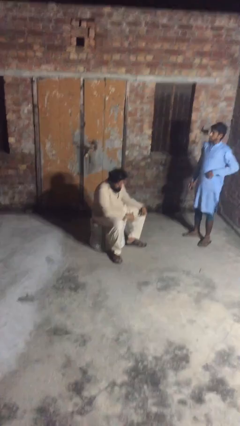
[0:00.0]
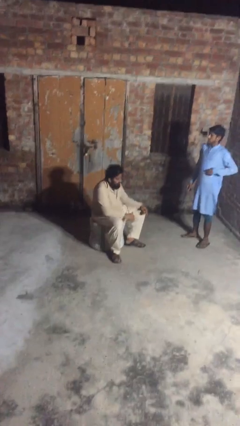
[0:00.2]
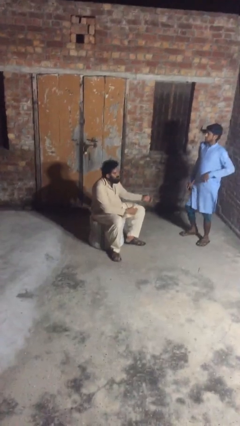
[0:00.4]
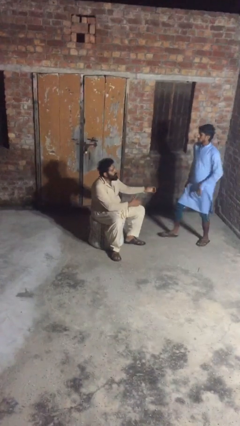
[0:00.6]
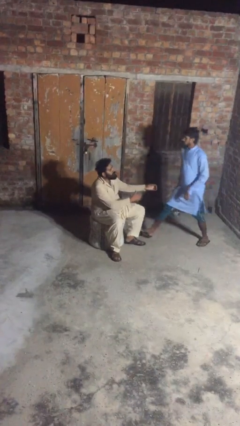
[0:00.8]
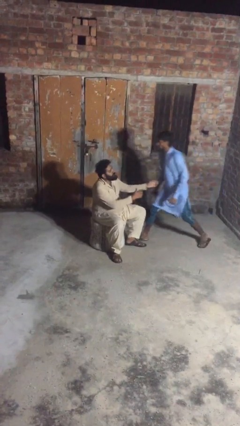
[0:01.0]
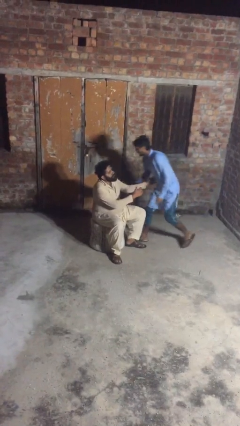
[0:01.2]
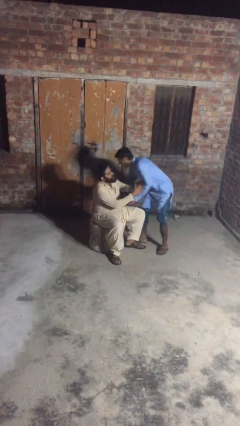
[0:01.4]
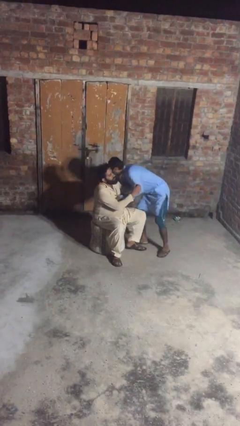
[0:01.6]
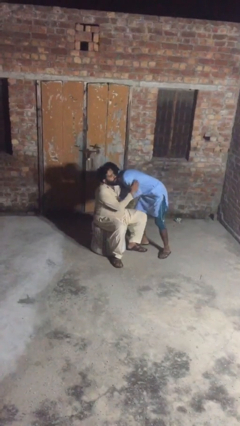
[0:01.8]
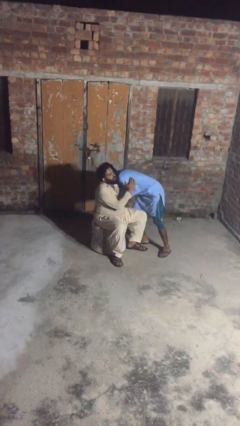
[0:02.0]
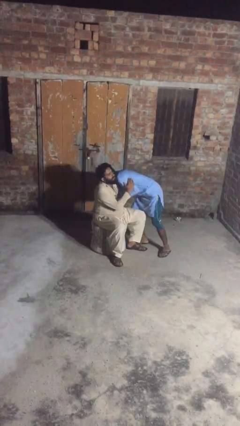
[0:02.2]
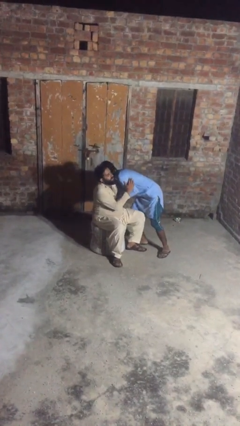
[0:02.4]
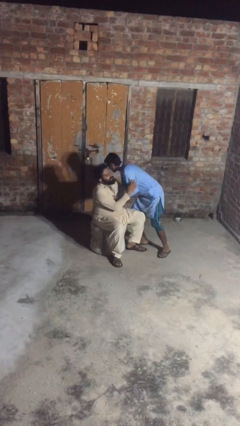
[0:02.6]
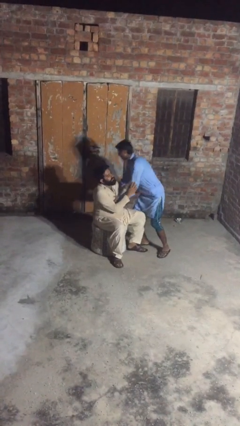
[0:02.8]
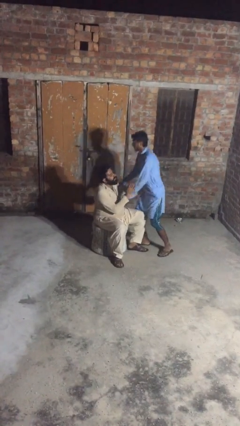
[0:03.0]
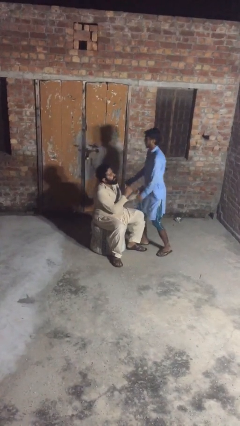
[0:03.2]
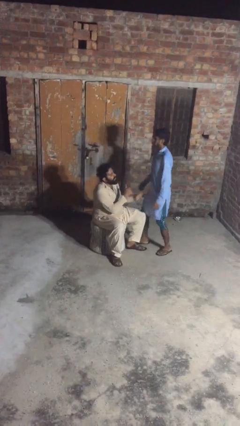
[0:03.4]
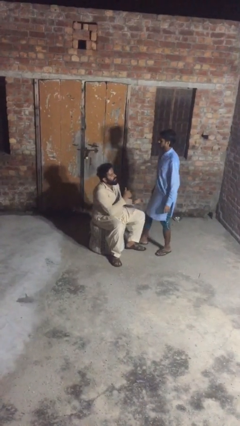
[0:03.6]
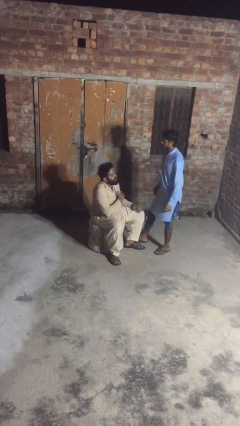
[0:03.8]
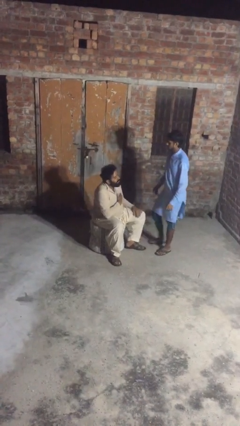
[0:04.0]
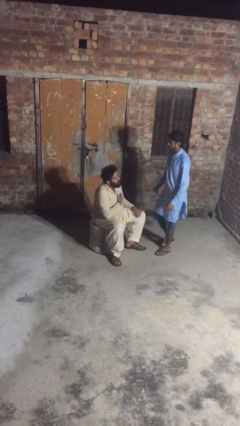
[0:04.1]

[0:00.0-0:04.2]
person embraces person

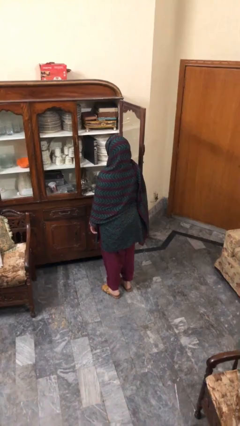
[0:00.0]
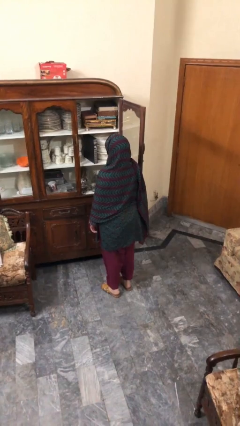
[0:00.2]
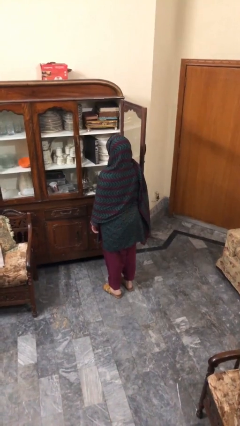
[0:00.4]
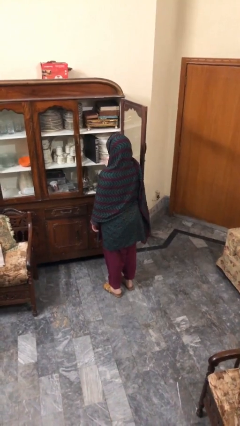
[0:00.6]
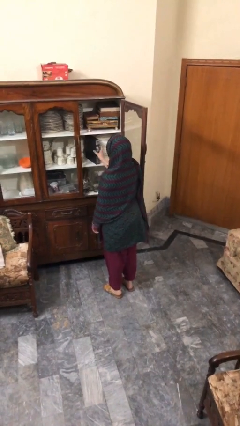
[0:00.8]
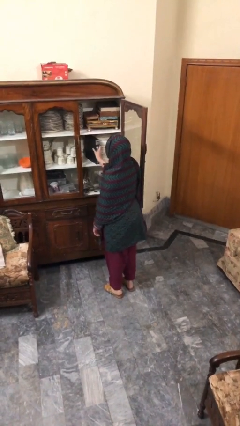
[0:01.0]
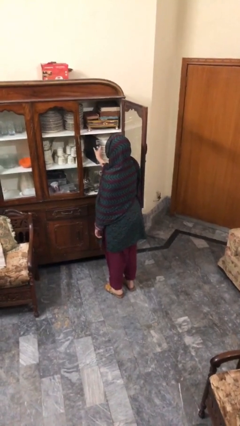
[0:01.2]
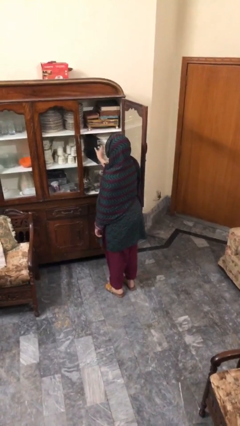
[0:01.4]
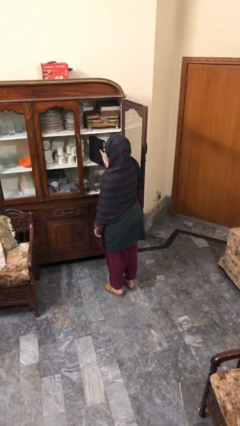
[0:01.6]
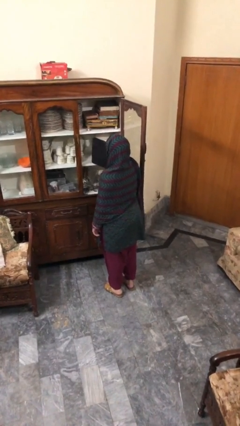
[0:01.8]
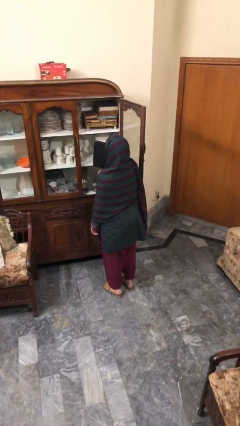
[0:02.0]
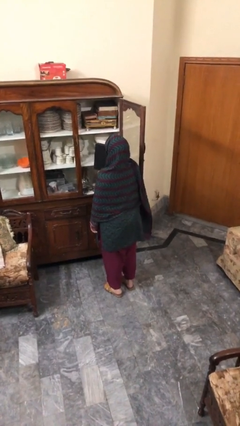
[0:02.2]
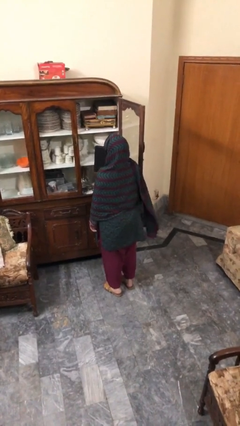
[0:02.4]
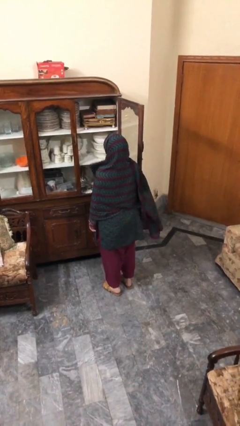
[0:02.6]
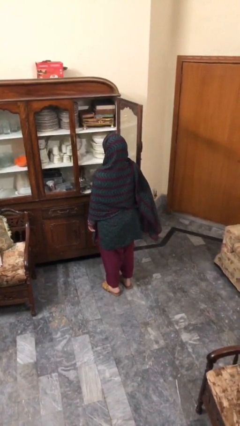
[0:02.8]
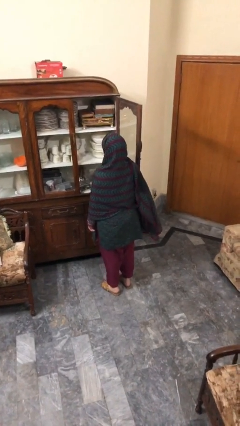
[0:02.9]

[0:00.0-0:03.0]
person picks up object from cabinet

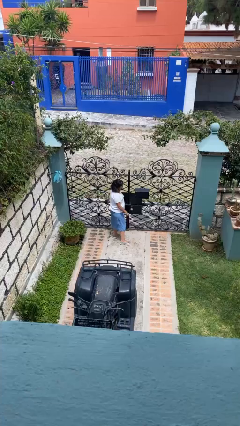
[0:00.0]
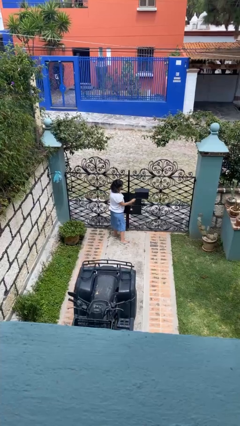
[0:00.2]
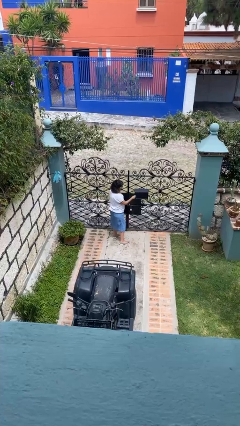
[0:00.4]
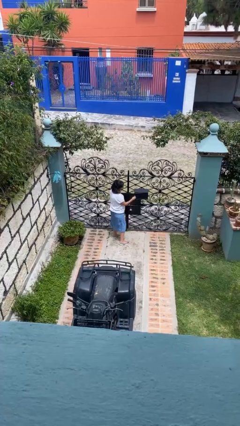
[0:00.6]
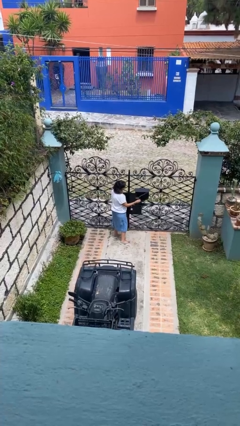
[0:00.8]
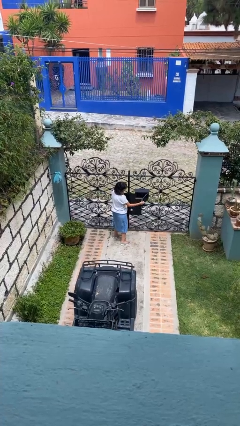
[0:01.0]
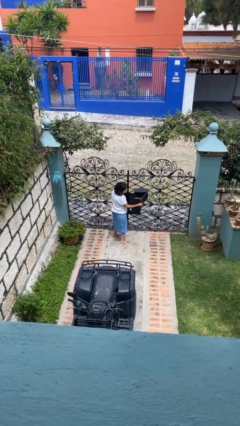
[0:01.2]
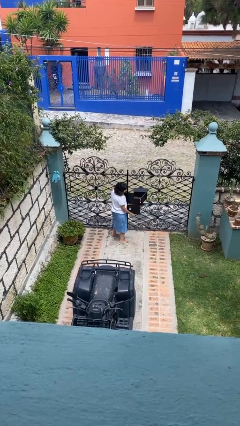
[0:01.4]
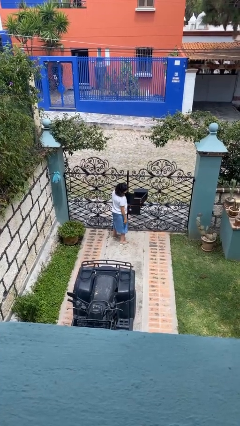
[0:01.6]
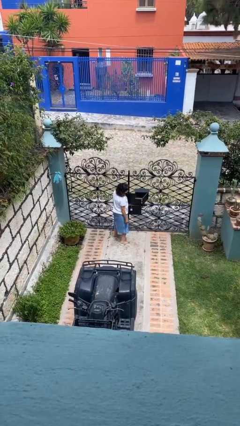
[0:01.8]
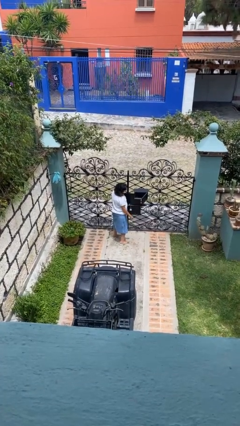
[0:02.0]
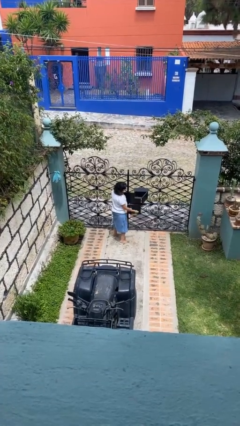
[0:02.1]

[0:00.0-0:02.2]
person opens mailbox

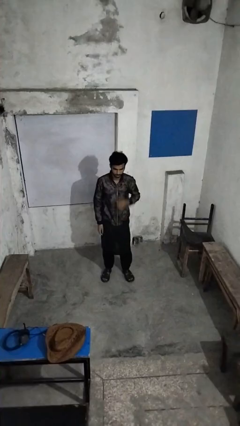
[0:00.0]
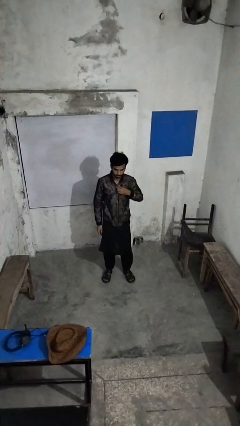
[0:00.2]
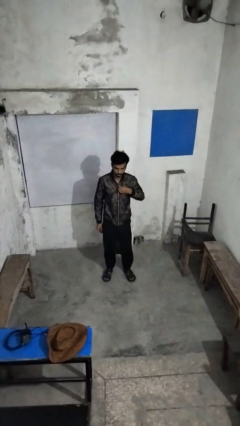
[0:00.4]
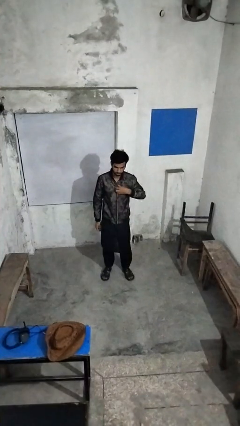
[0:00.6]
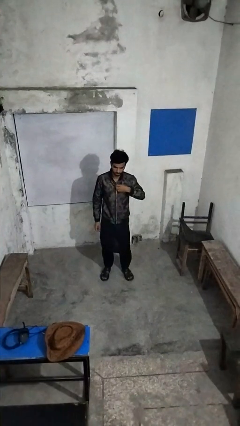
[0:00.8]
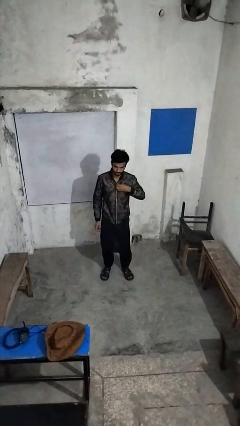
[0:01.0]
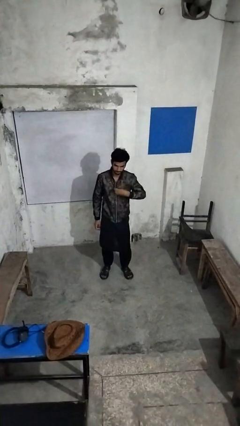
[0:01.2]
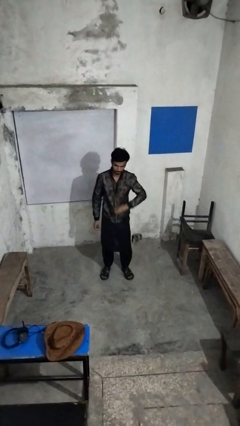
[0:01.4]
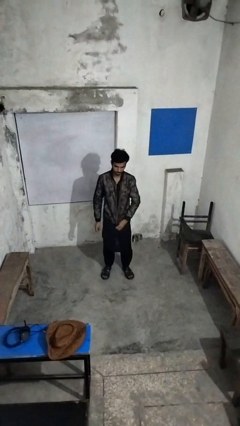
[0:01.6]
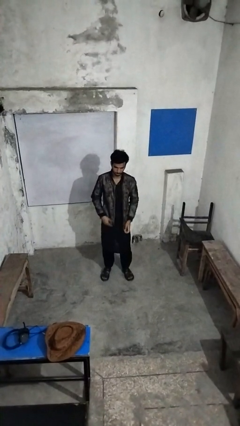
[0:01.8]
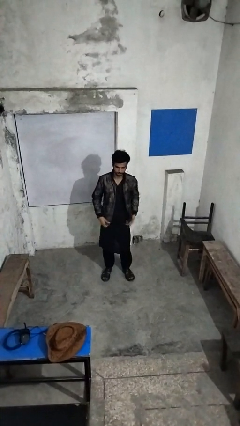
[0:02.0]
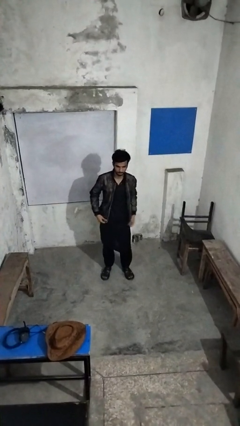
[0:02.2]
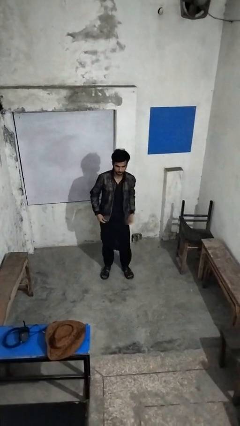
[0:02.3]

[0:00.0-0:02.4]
person unzips jacket

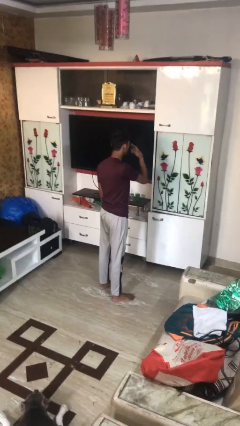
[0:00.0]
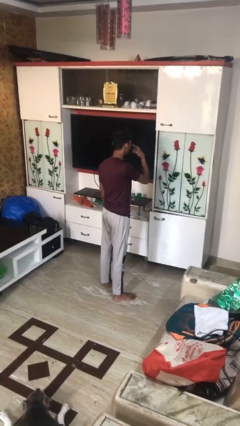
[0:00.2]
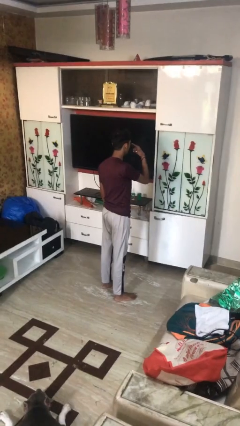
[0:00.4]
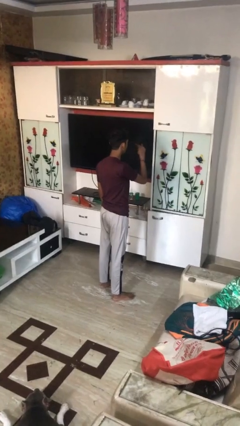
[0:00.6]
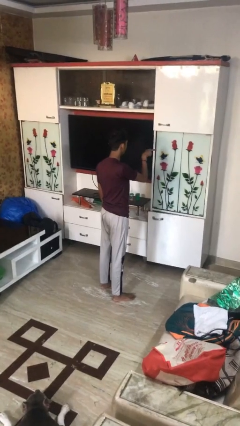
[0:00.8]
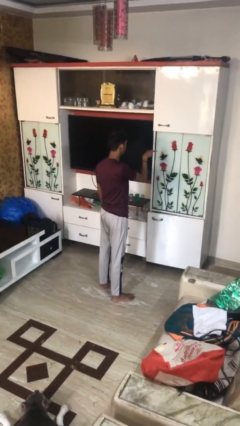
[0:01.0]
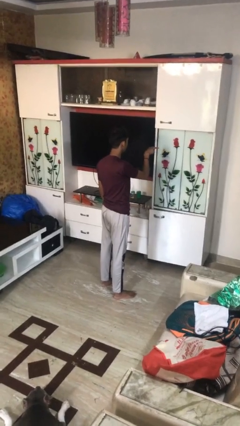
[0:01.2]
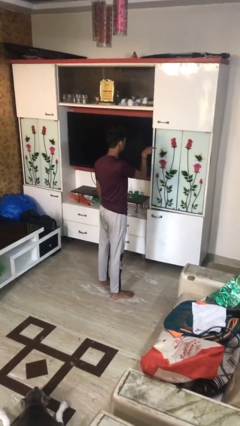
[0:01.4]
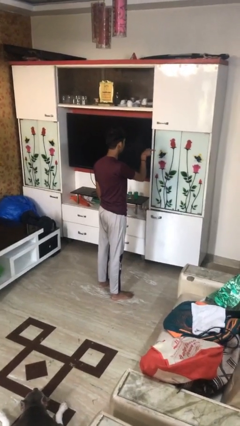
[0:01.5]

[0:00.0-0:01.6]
person gestures watch closely

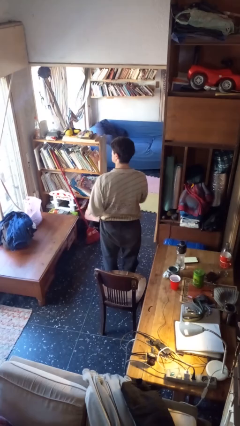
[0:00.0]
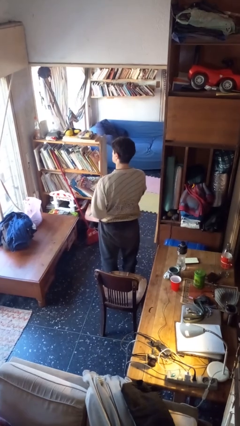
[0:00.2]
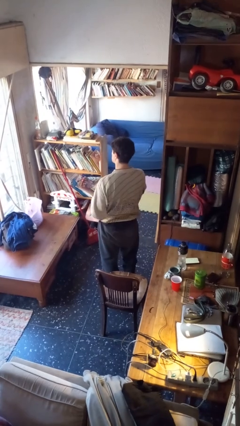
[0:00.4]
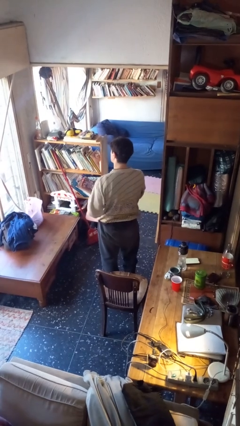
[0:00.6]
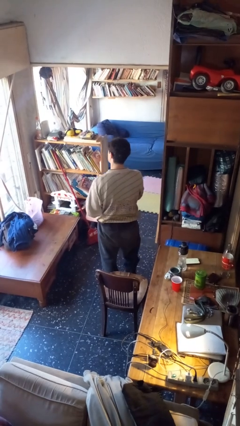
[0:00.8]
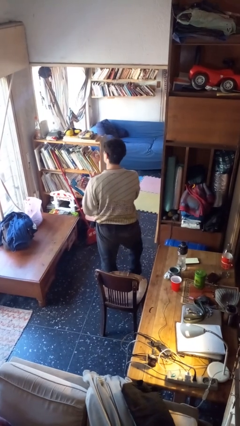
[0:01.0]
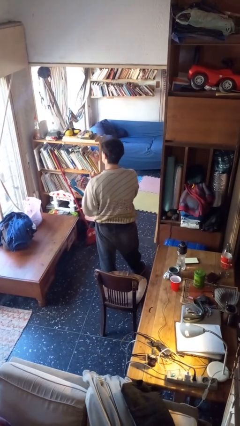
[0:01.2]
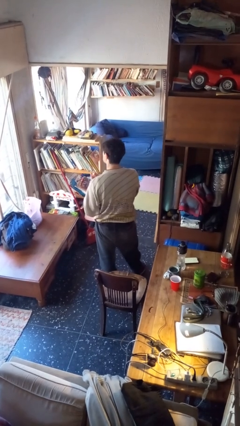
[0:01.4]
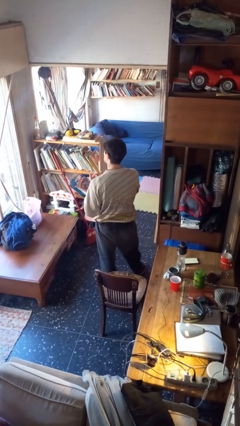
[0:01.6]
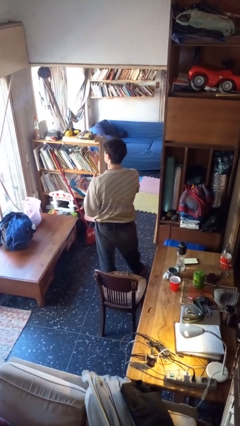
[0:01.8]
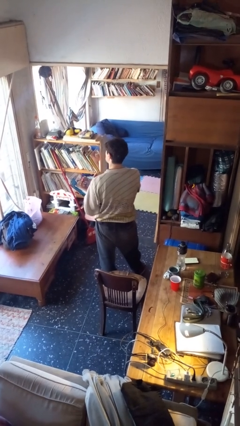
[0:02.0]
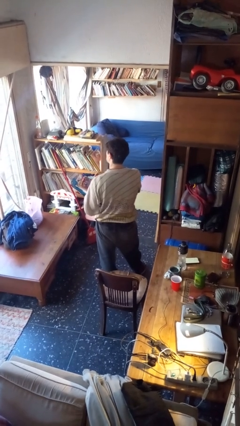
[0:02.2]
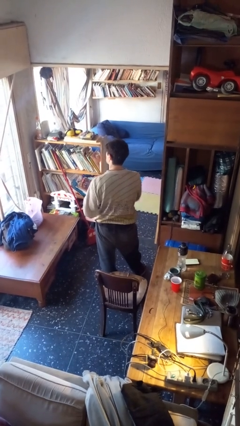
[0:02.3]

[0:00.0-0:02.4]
person snaps fingers

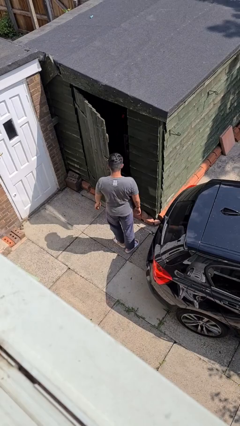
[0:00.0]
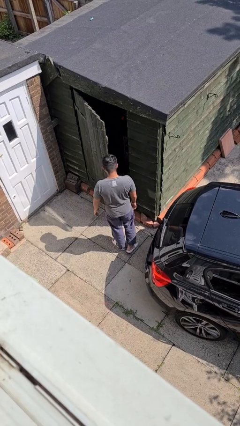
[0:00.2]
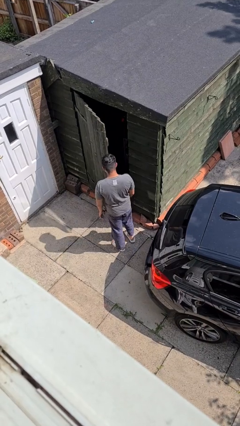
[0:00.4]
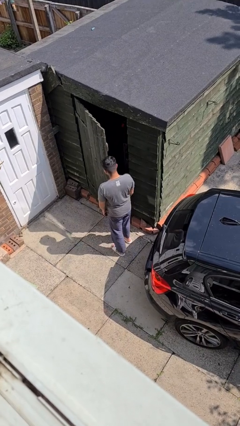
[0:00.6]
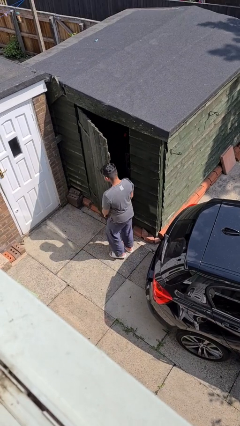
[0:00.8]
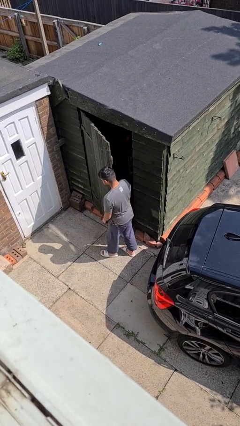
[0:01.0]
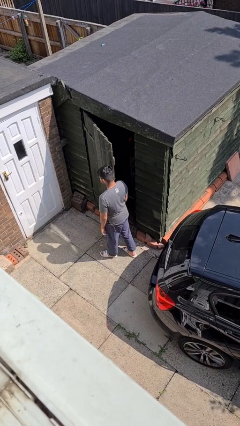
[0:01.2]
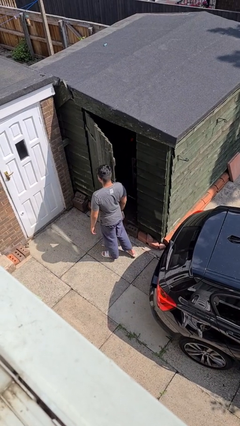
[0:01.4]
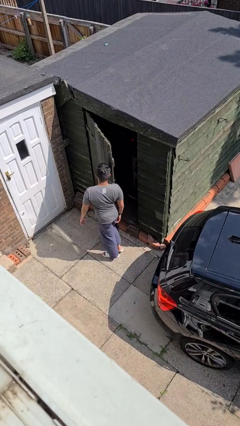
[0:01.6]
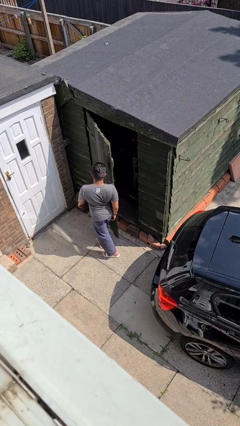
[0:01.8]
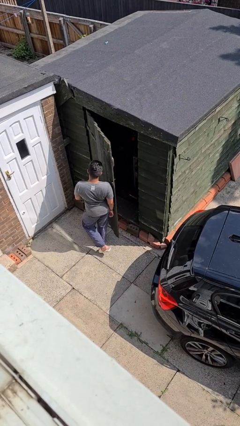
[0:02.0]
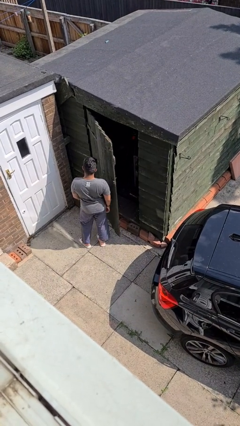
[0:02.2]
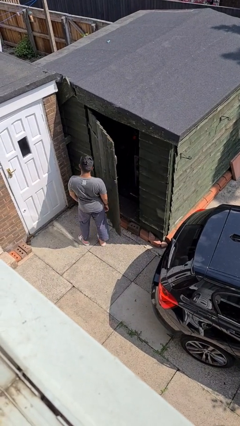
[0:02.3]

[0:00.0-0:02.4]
person bumps into wall
